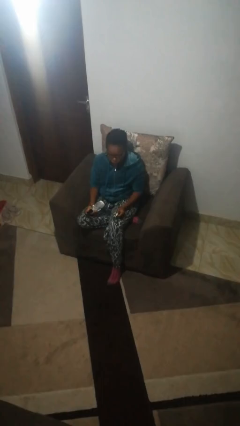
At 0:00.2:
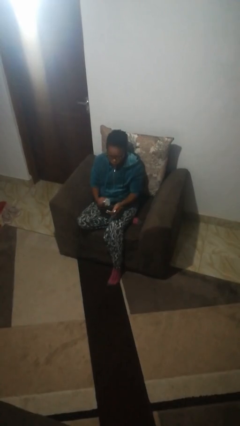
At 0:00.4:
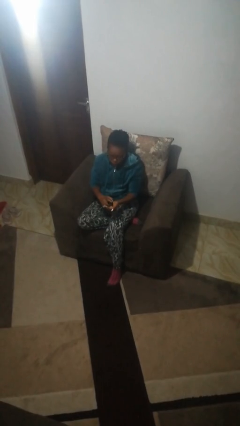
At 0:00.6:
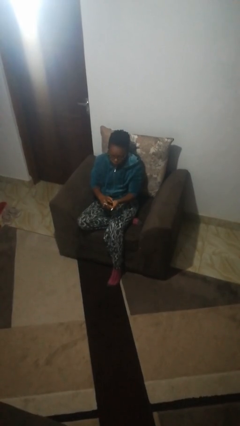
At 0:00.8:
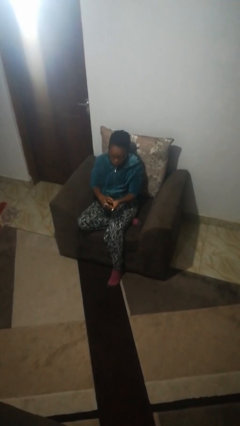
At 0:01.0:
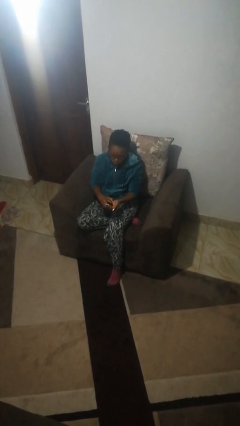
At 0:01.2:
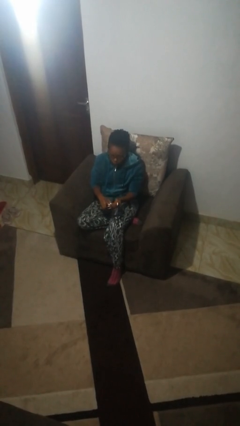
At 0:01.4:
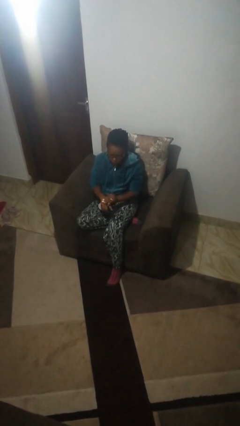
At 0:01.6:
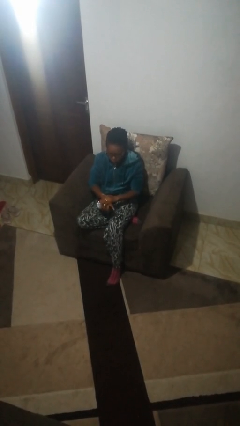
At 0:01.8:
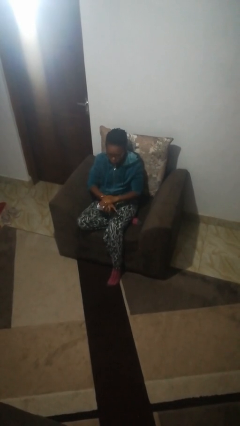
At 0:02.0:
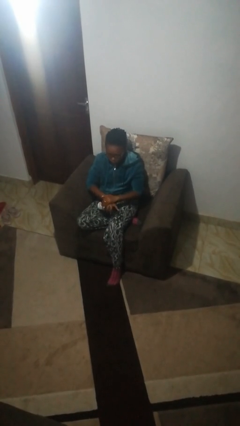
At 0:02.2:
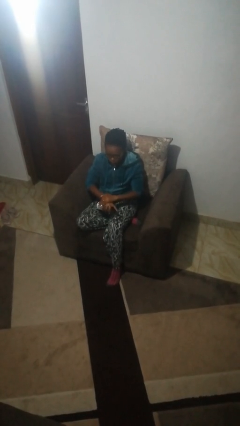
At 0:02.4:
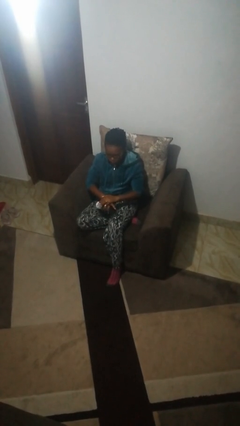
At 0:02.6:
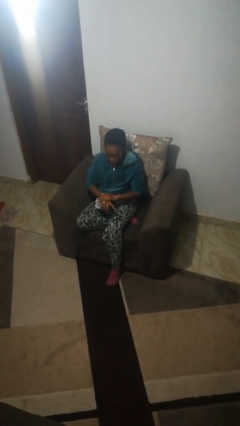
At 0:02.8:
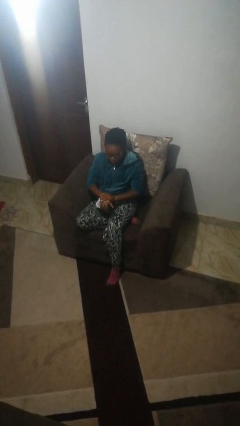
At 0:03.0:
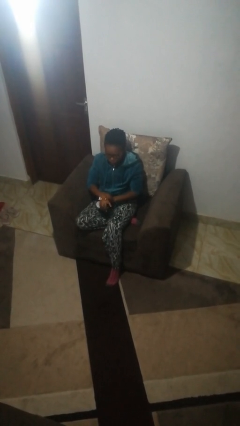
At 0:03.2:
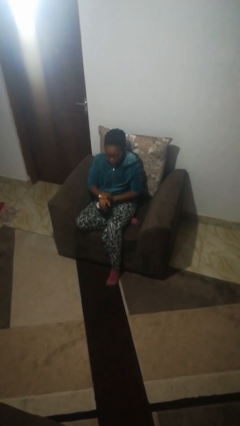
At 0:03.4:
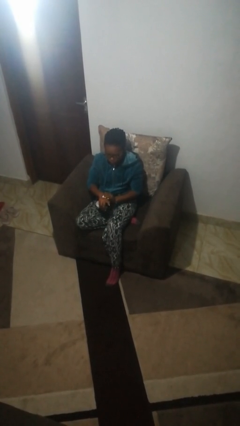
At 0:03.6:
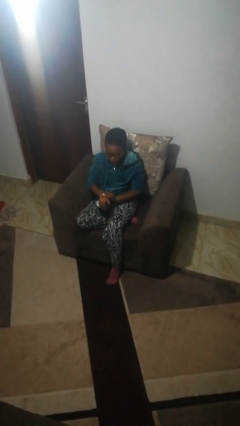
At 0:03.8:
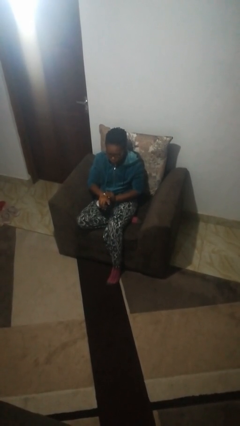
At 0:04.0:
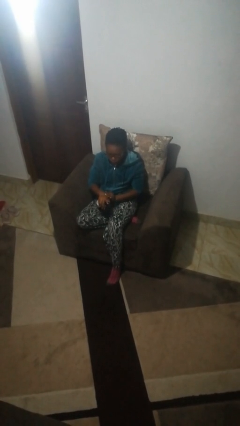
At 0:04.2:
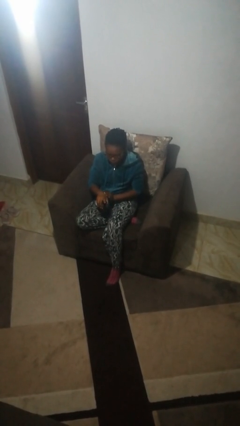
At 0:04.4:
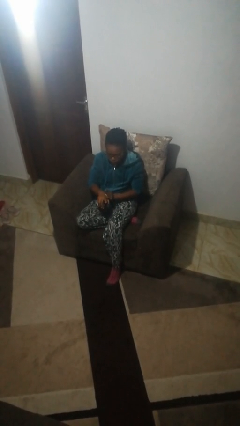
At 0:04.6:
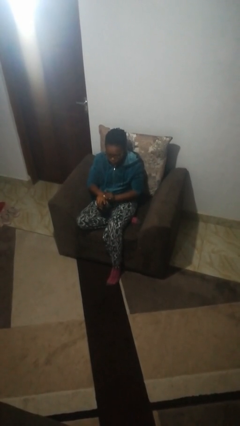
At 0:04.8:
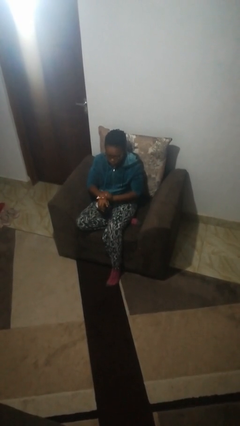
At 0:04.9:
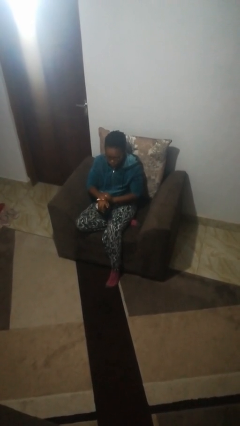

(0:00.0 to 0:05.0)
person applies sunscreen

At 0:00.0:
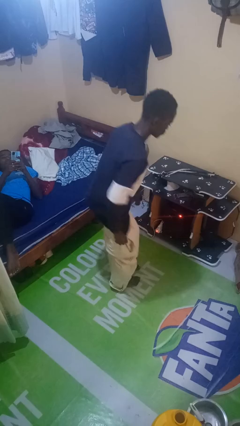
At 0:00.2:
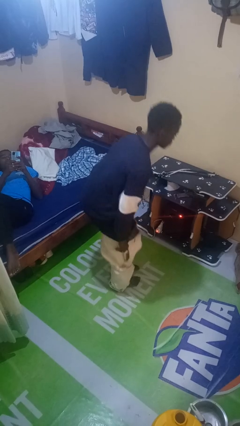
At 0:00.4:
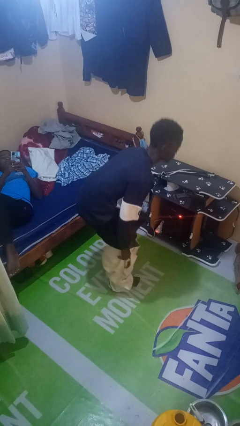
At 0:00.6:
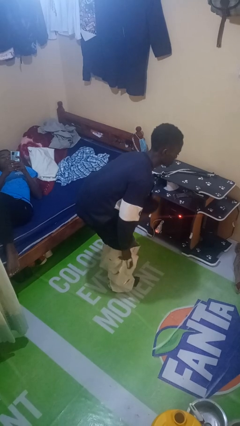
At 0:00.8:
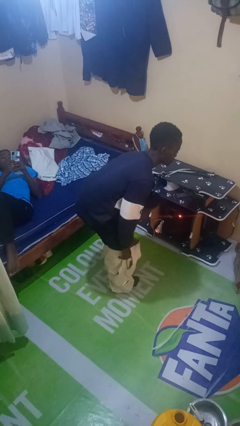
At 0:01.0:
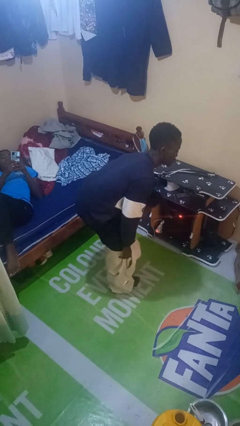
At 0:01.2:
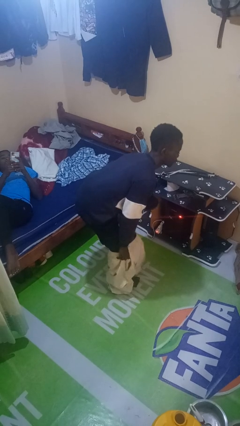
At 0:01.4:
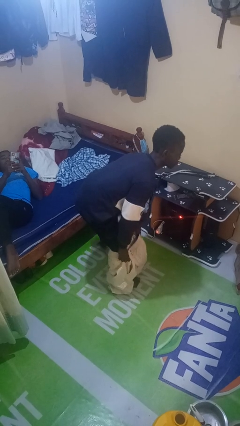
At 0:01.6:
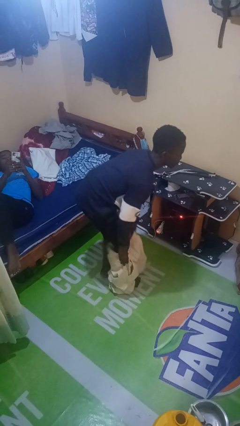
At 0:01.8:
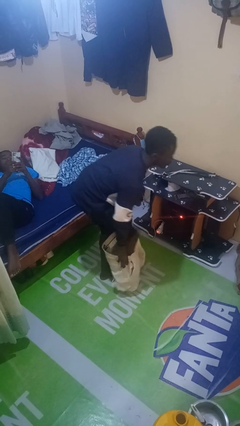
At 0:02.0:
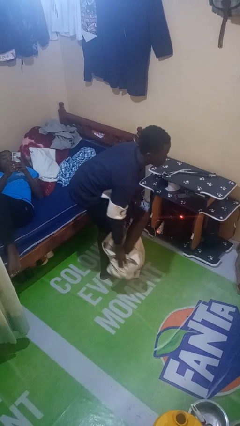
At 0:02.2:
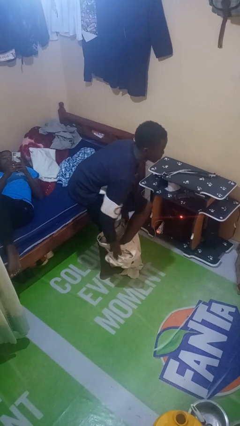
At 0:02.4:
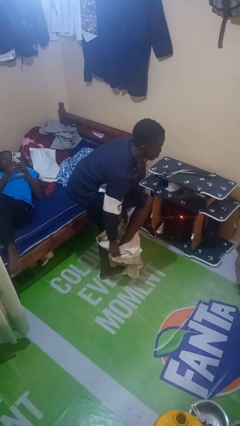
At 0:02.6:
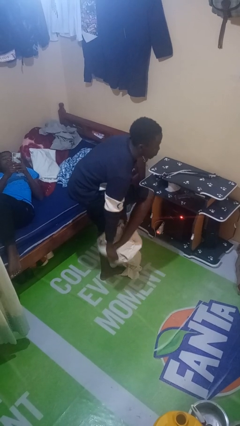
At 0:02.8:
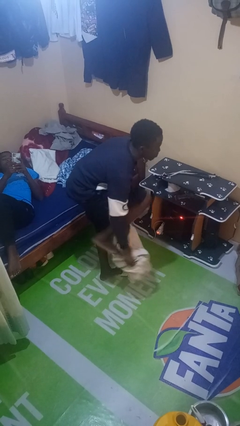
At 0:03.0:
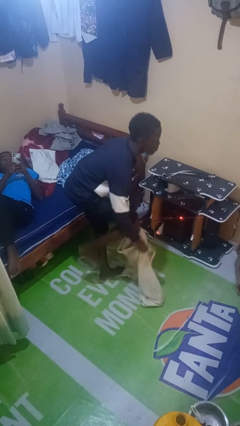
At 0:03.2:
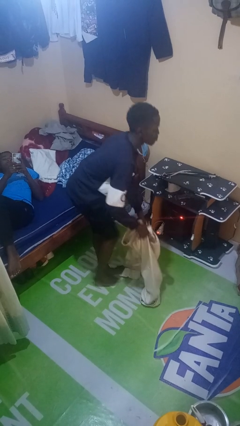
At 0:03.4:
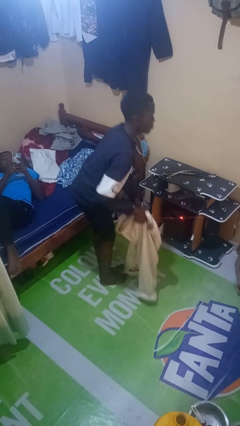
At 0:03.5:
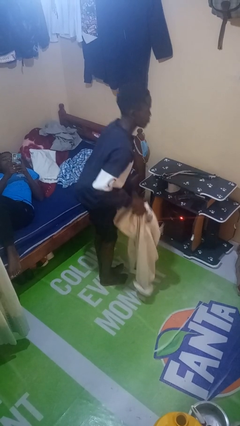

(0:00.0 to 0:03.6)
person takes off pants

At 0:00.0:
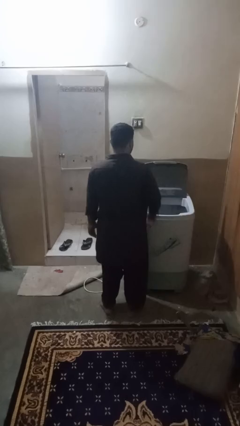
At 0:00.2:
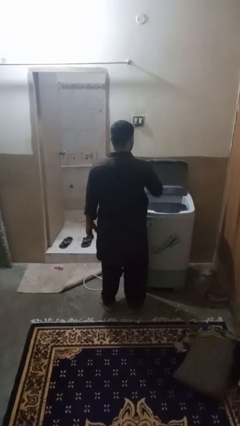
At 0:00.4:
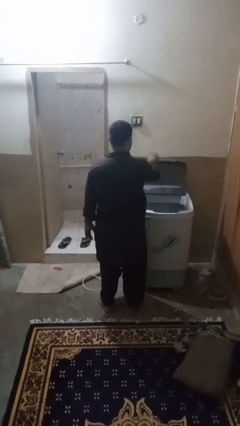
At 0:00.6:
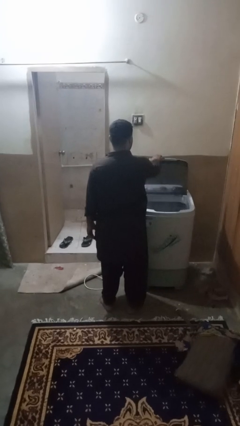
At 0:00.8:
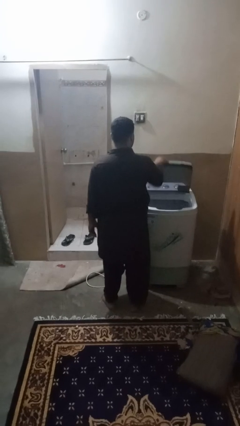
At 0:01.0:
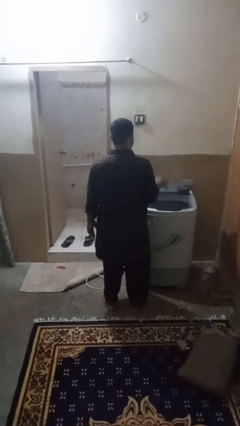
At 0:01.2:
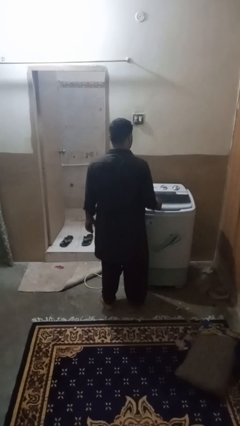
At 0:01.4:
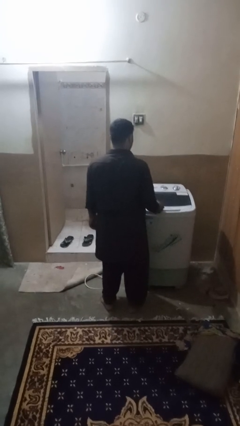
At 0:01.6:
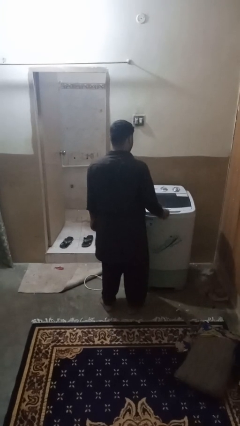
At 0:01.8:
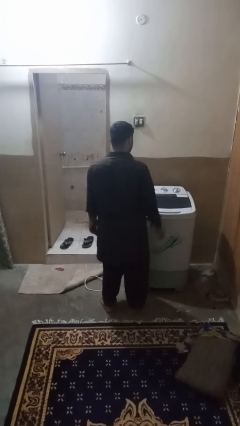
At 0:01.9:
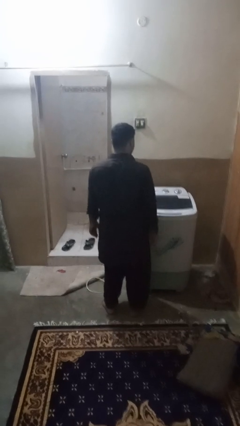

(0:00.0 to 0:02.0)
person closes clothes washer

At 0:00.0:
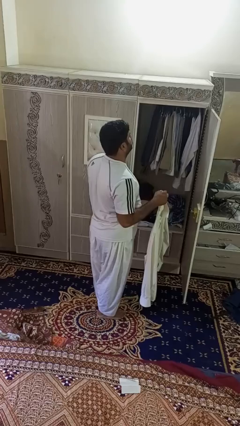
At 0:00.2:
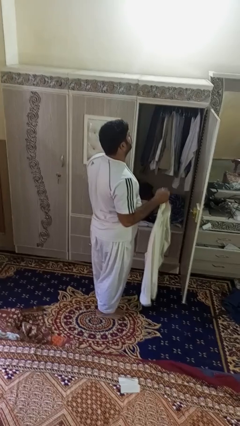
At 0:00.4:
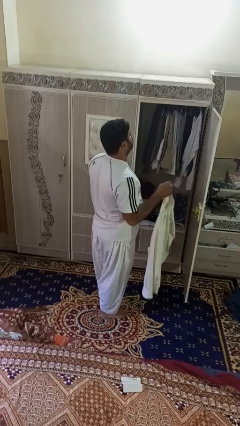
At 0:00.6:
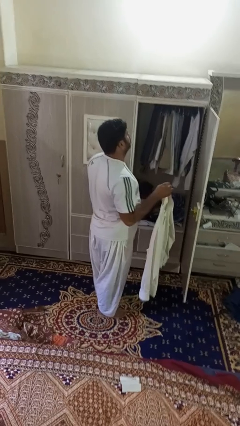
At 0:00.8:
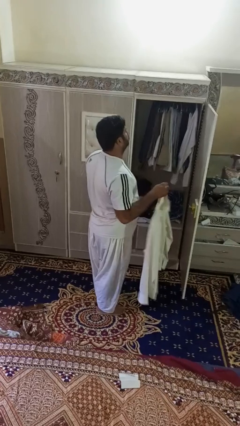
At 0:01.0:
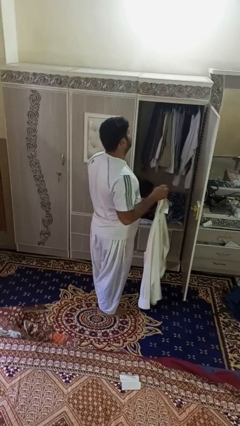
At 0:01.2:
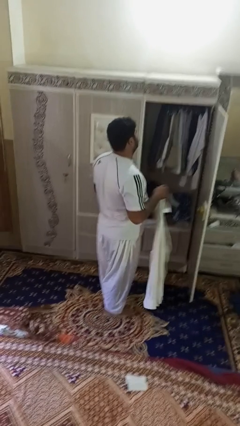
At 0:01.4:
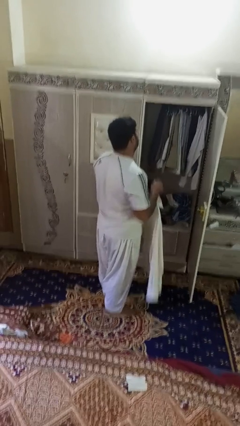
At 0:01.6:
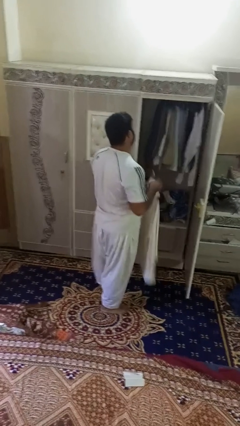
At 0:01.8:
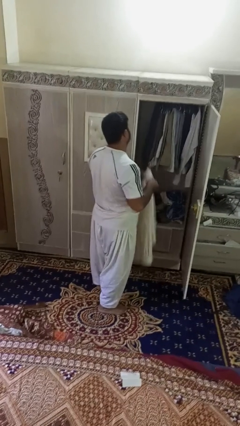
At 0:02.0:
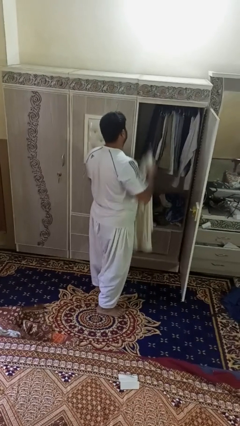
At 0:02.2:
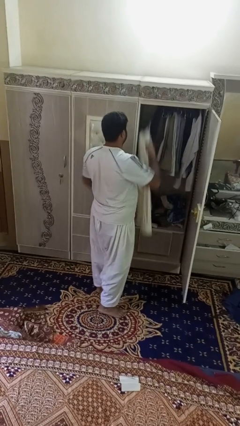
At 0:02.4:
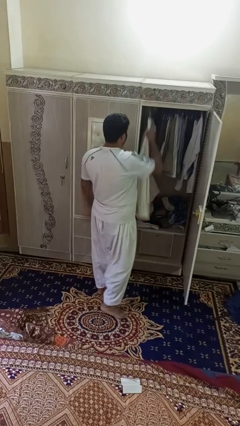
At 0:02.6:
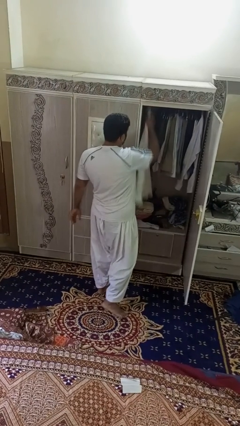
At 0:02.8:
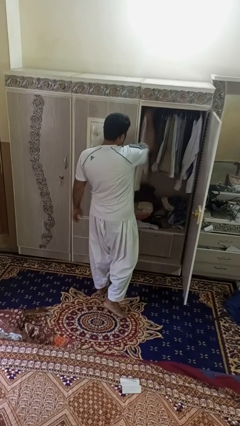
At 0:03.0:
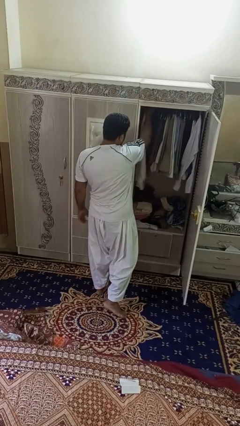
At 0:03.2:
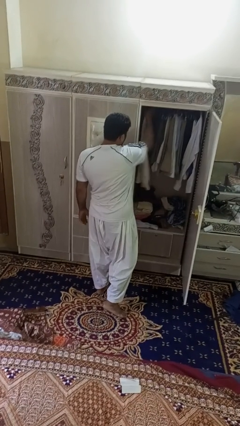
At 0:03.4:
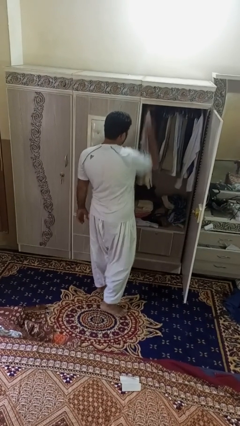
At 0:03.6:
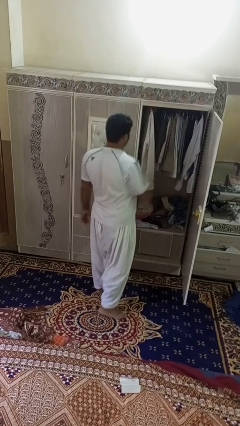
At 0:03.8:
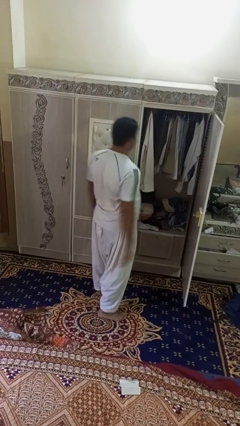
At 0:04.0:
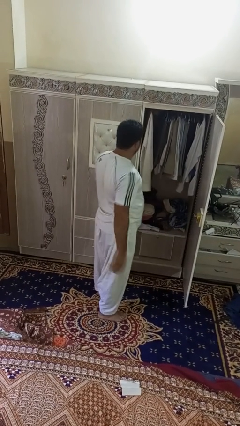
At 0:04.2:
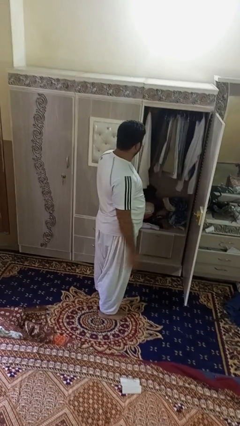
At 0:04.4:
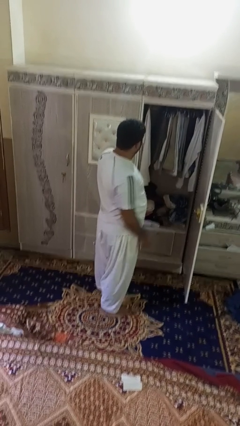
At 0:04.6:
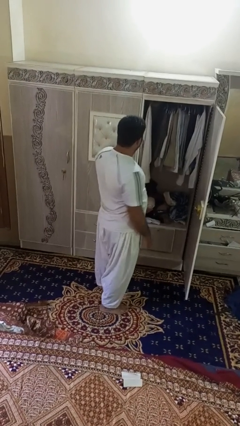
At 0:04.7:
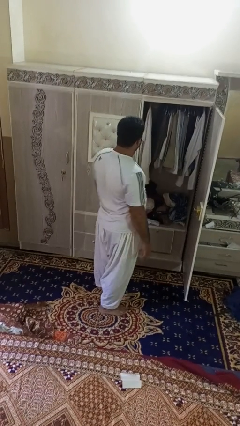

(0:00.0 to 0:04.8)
person puts clothes into closet

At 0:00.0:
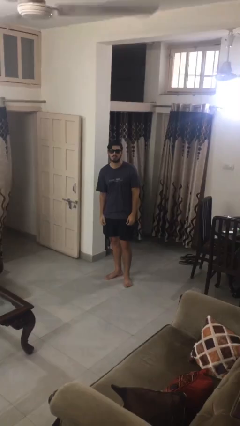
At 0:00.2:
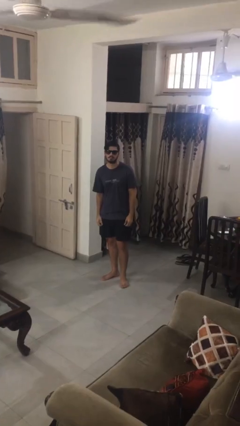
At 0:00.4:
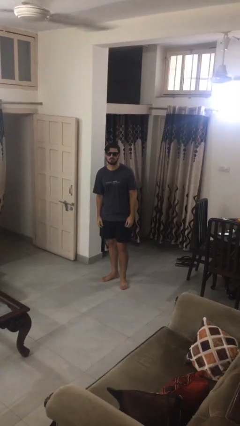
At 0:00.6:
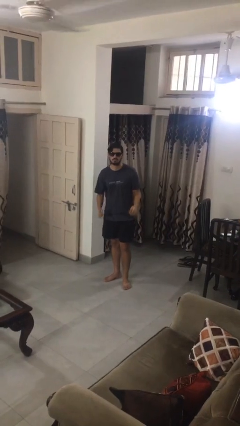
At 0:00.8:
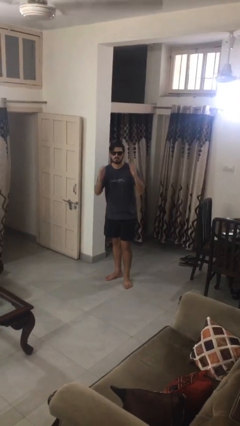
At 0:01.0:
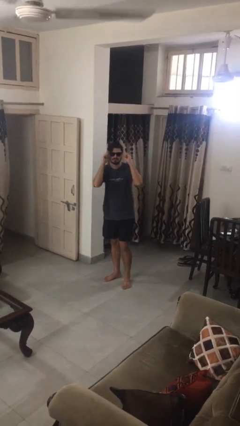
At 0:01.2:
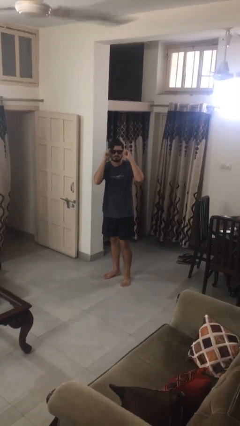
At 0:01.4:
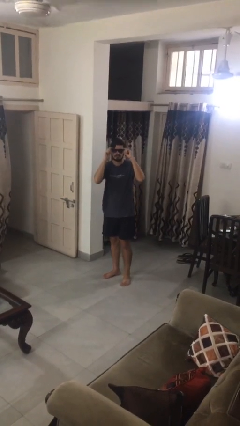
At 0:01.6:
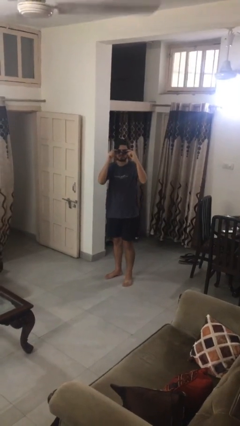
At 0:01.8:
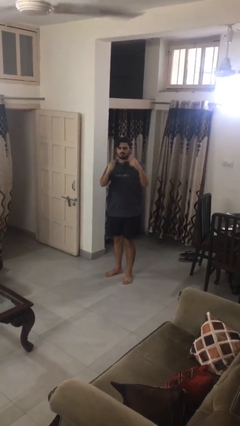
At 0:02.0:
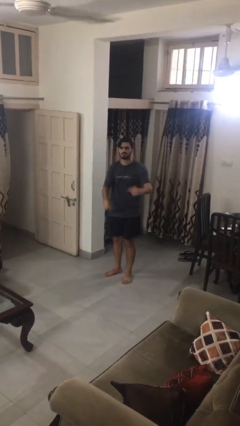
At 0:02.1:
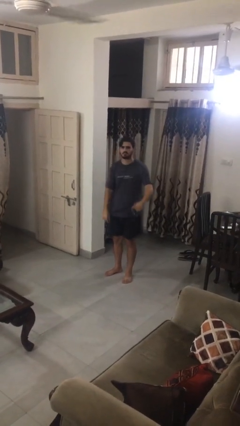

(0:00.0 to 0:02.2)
person takes off sunglasses
